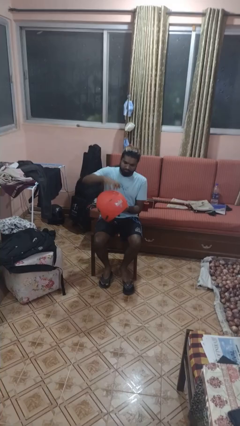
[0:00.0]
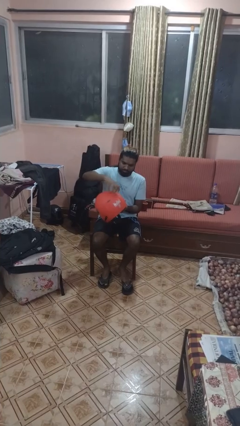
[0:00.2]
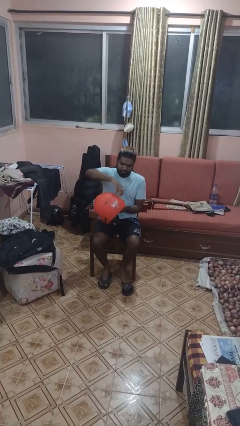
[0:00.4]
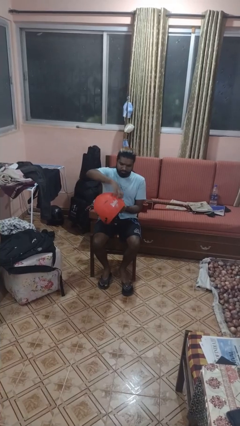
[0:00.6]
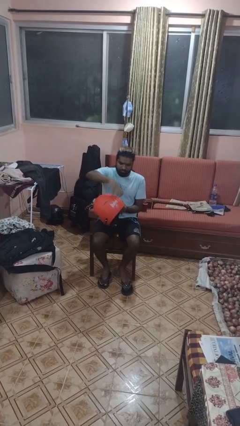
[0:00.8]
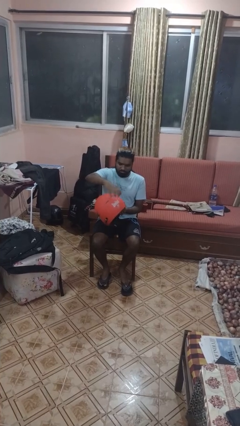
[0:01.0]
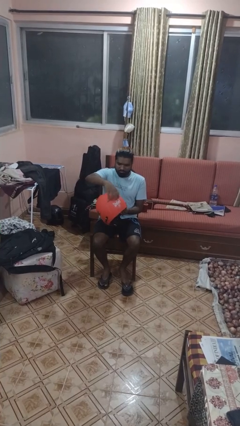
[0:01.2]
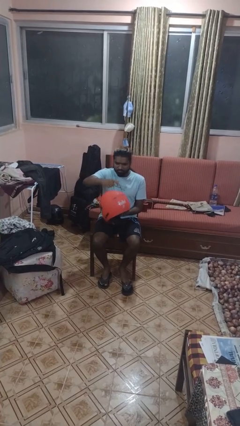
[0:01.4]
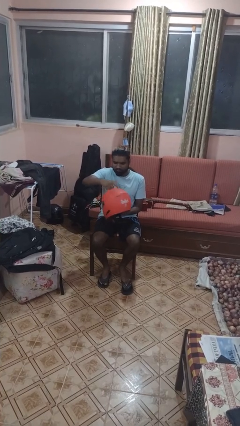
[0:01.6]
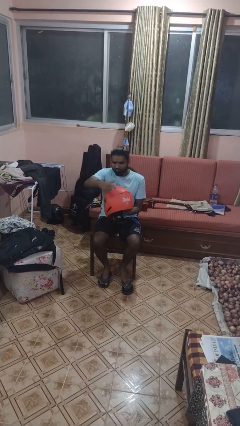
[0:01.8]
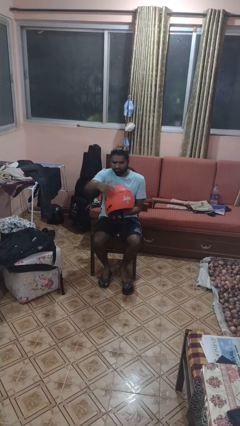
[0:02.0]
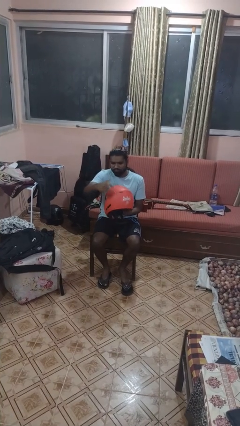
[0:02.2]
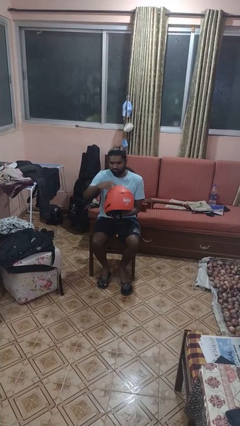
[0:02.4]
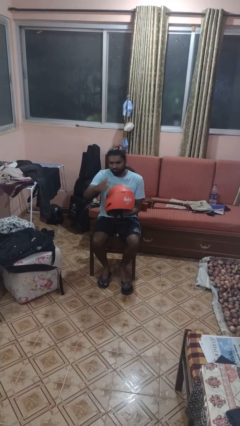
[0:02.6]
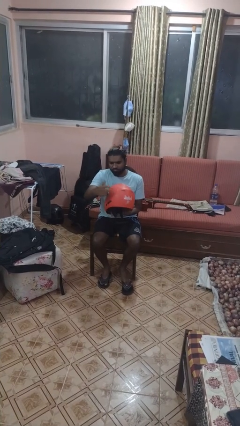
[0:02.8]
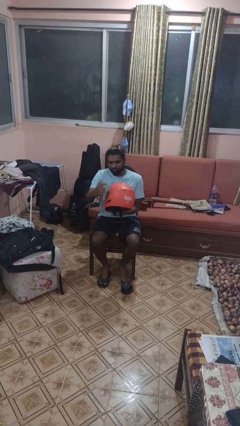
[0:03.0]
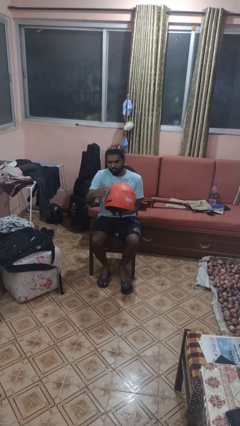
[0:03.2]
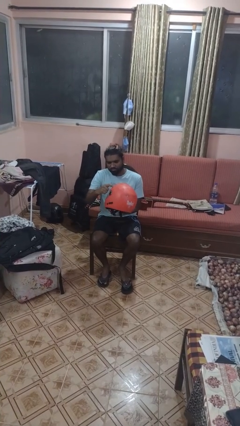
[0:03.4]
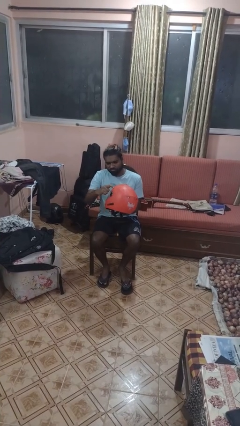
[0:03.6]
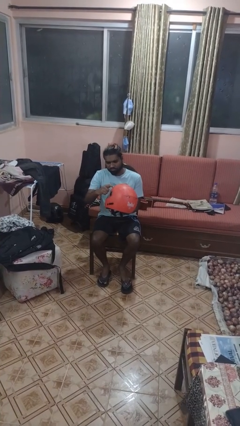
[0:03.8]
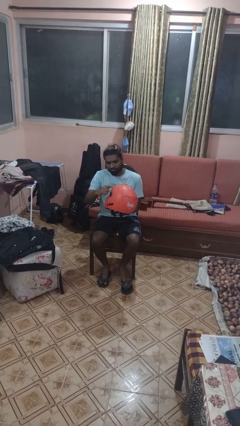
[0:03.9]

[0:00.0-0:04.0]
person taps object with finger

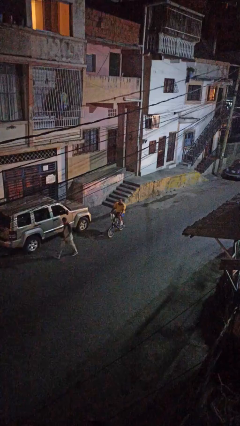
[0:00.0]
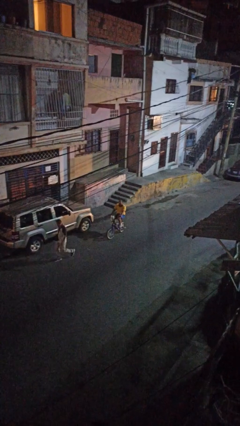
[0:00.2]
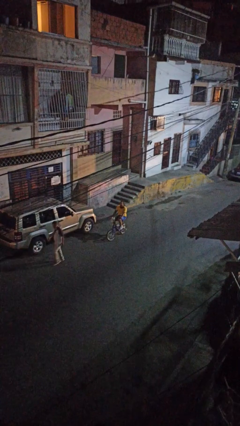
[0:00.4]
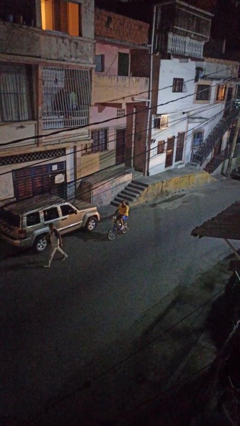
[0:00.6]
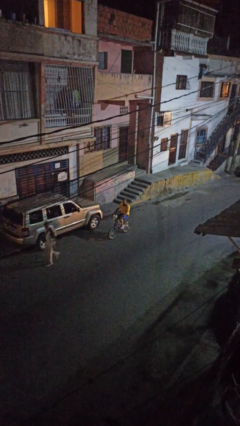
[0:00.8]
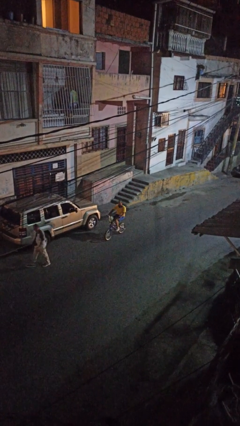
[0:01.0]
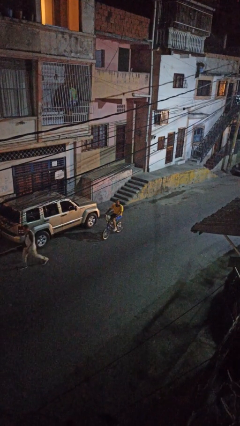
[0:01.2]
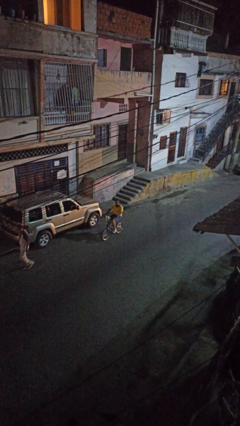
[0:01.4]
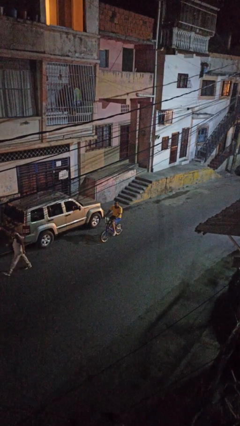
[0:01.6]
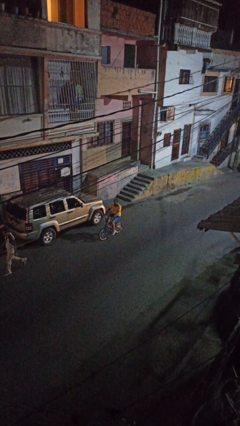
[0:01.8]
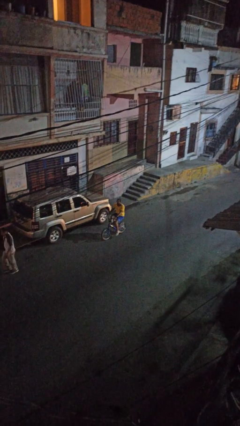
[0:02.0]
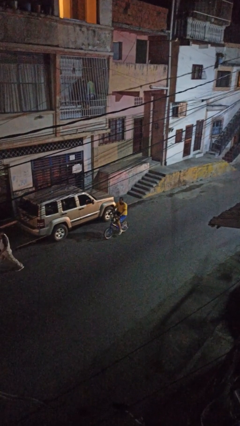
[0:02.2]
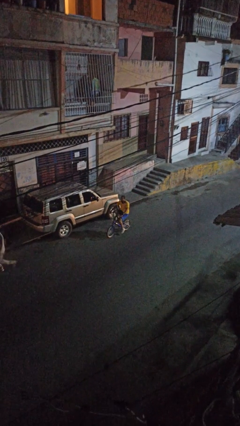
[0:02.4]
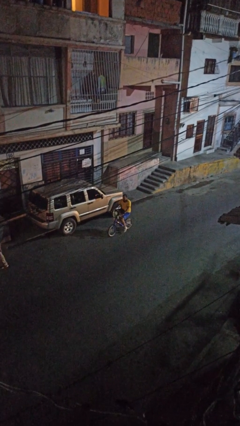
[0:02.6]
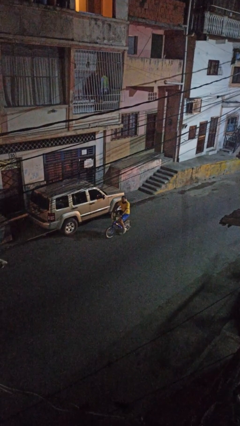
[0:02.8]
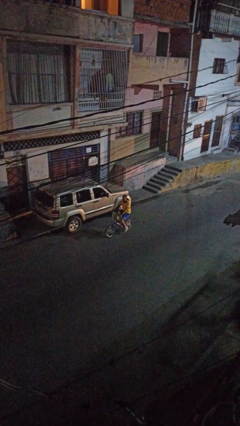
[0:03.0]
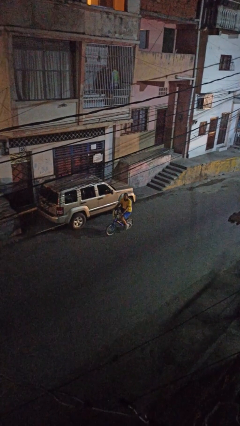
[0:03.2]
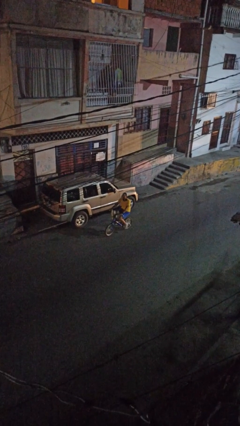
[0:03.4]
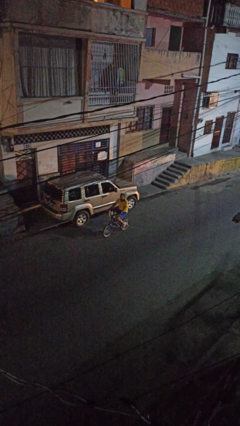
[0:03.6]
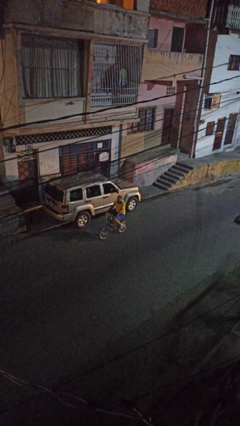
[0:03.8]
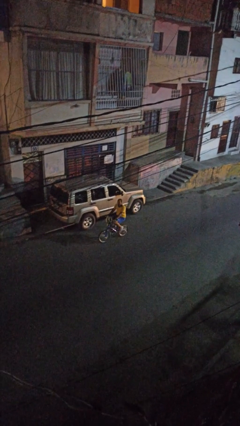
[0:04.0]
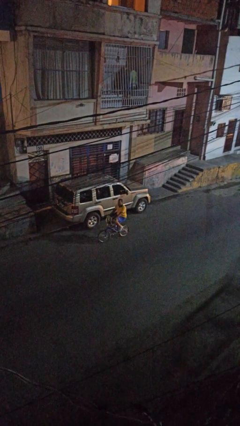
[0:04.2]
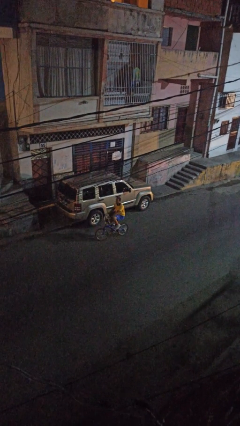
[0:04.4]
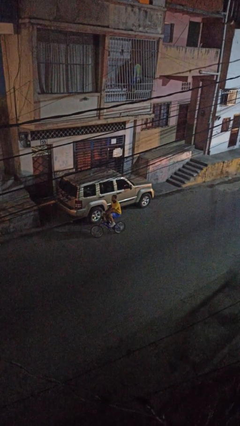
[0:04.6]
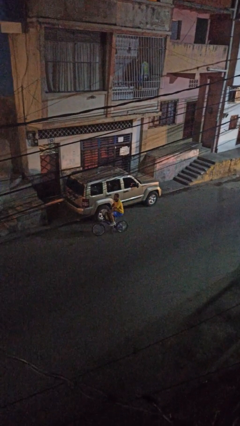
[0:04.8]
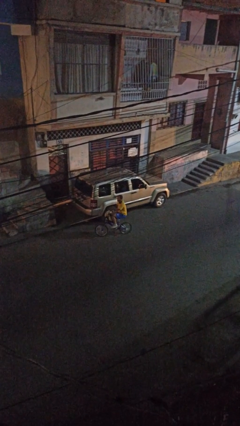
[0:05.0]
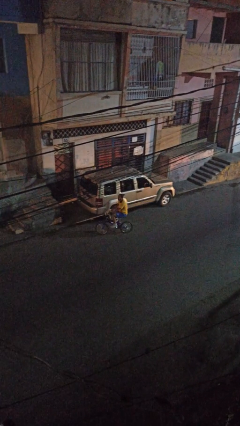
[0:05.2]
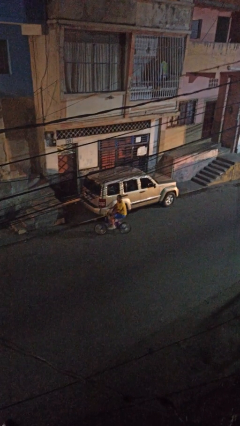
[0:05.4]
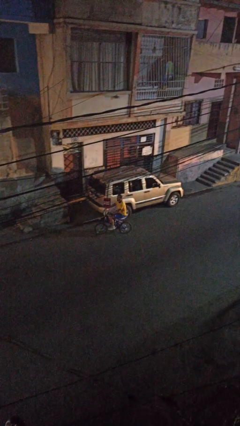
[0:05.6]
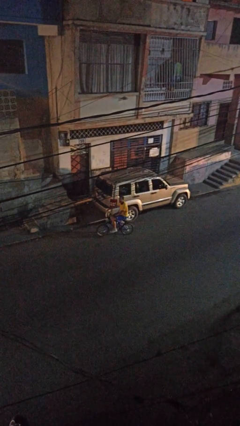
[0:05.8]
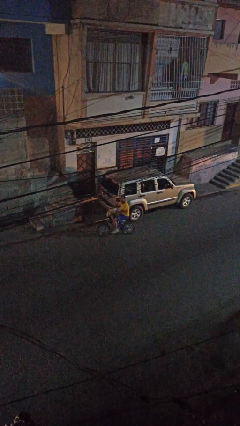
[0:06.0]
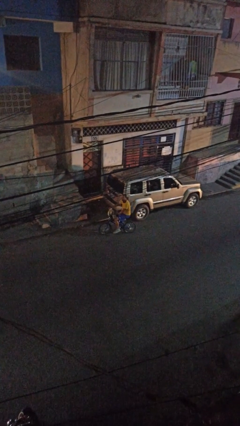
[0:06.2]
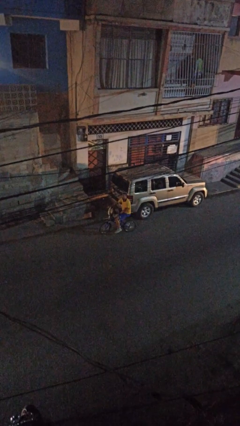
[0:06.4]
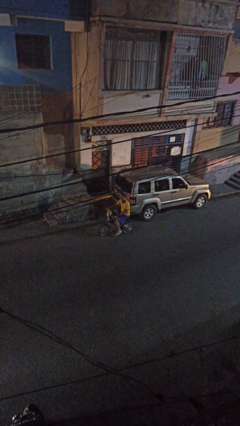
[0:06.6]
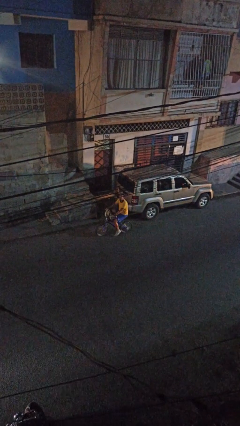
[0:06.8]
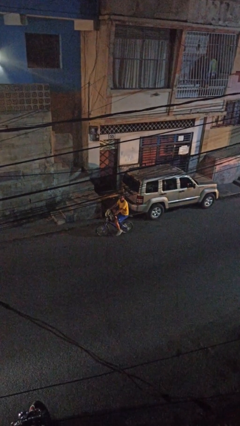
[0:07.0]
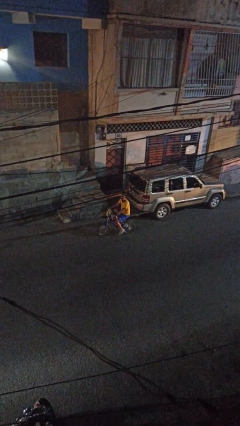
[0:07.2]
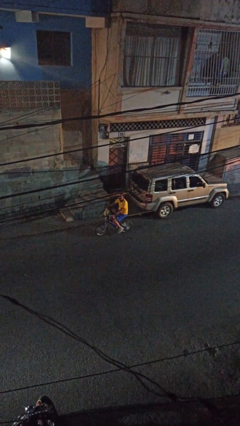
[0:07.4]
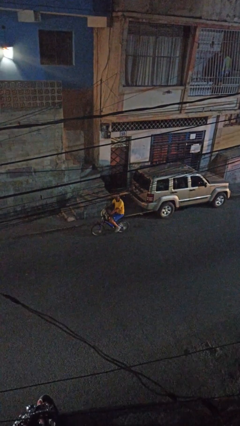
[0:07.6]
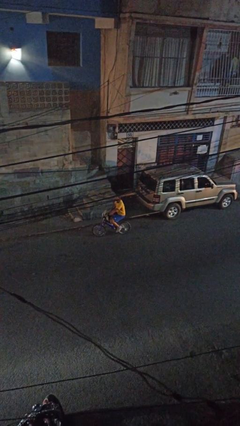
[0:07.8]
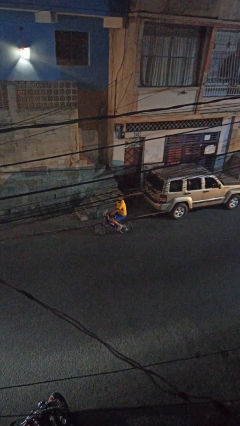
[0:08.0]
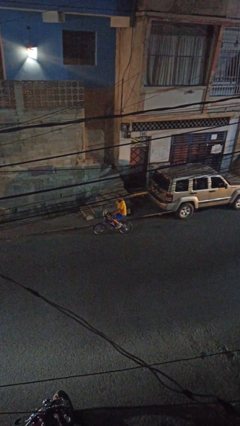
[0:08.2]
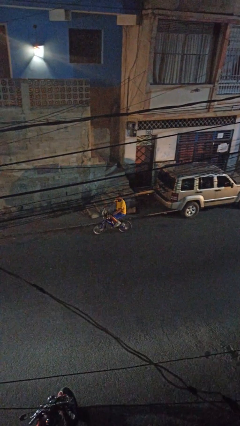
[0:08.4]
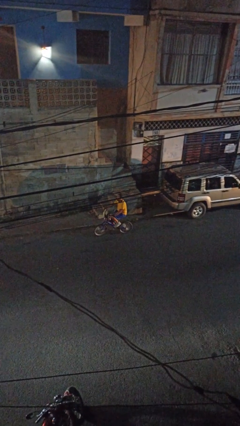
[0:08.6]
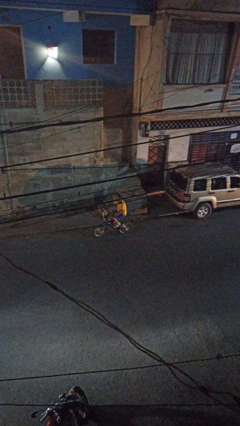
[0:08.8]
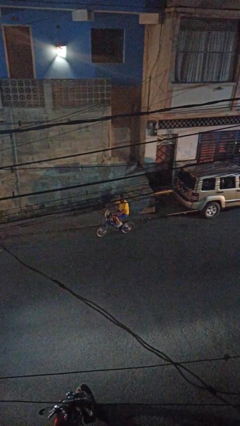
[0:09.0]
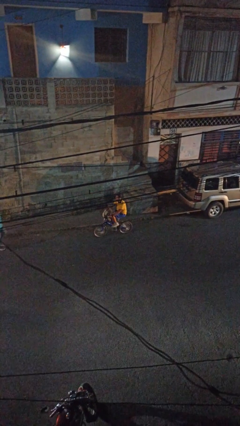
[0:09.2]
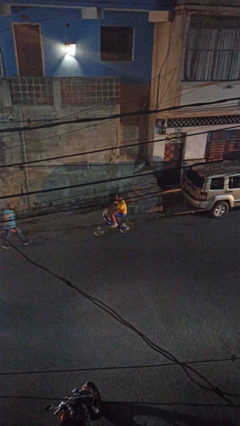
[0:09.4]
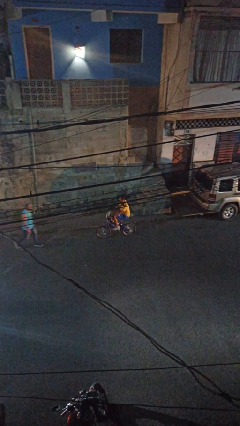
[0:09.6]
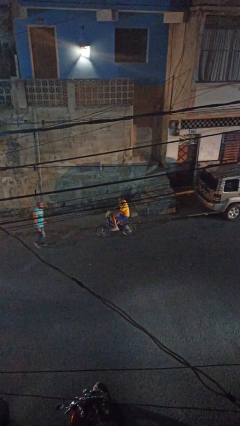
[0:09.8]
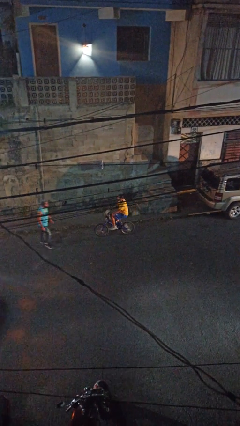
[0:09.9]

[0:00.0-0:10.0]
person rides bicycle

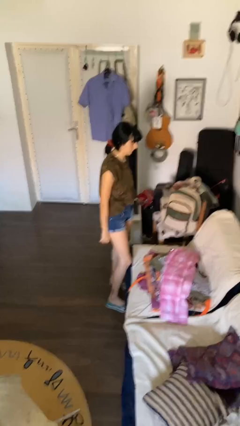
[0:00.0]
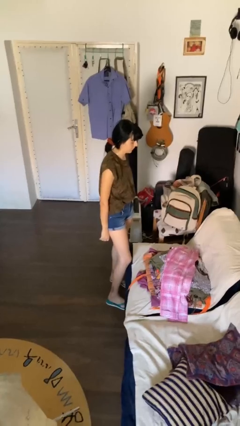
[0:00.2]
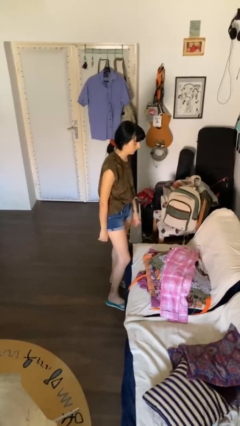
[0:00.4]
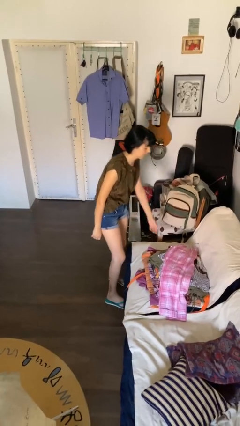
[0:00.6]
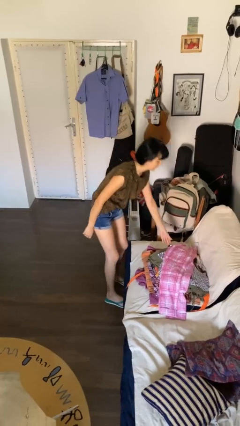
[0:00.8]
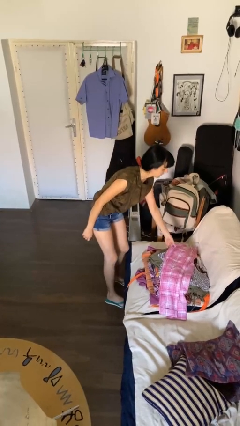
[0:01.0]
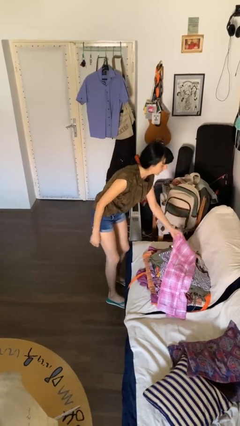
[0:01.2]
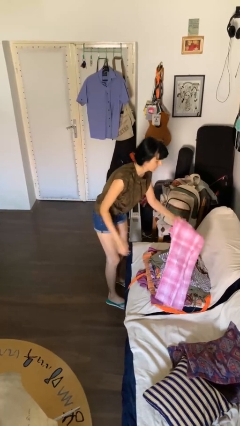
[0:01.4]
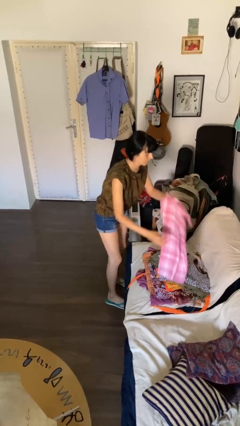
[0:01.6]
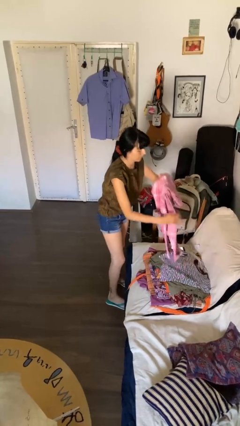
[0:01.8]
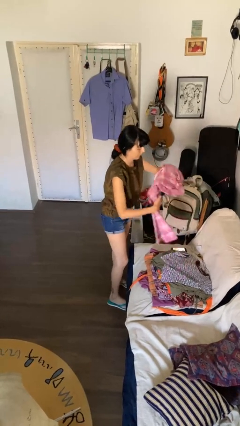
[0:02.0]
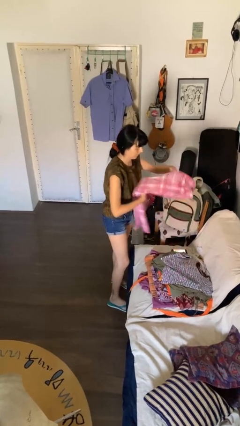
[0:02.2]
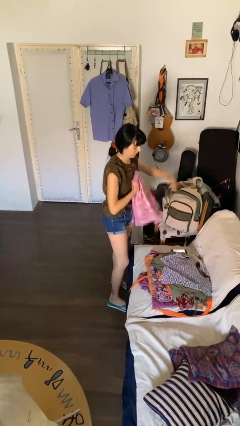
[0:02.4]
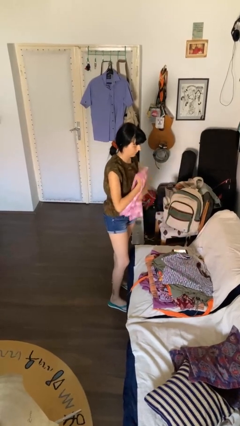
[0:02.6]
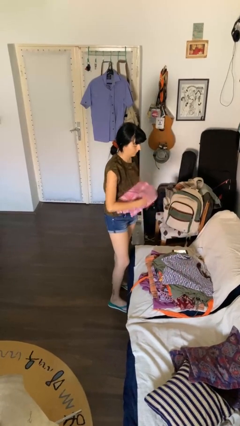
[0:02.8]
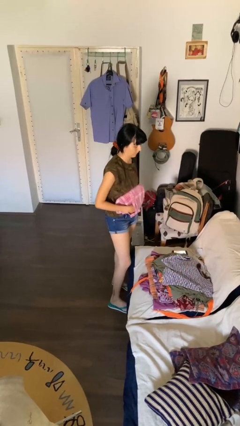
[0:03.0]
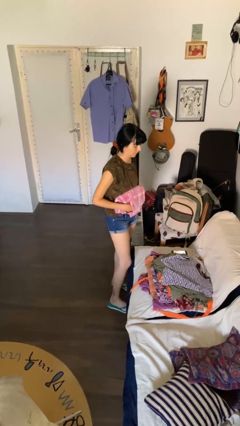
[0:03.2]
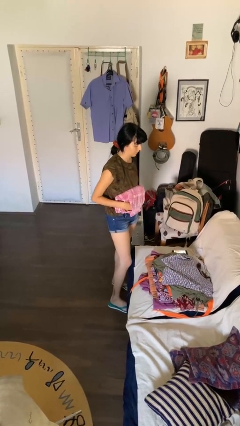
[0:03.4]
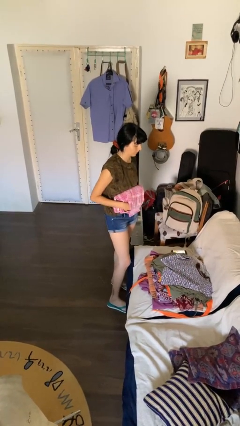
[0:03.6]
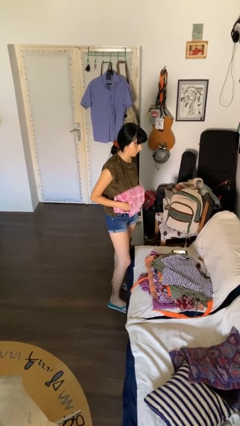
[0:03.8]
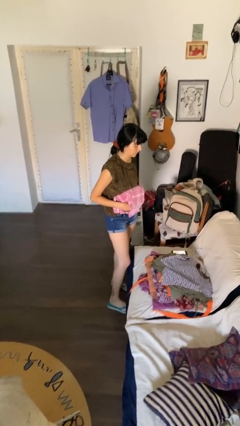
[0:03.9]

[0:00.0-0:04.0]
person folds pants
